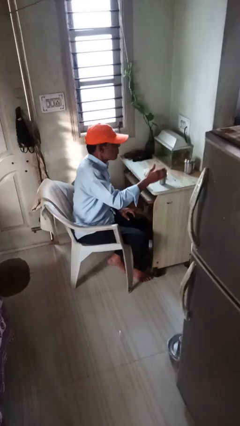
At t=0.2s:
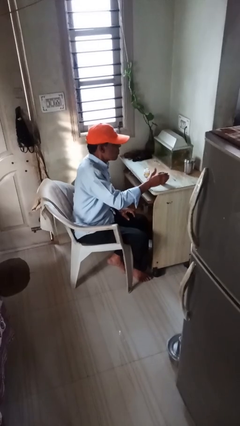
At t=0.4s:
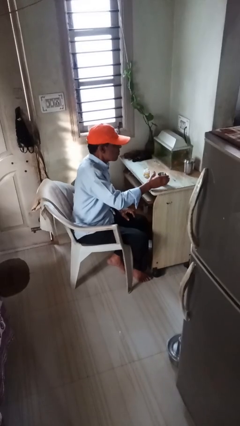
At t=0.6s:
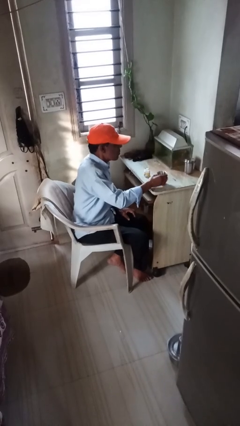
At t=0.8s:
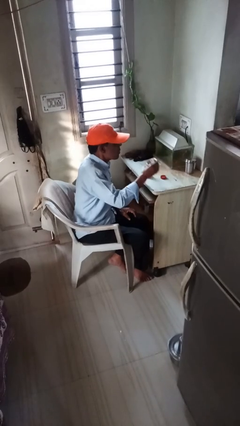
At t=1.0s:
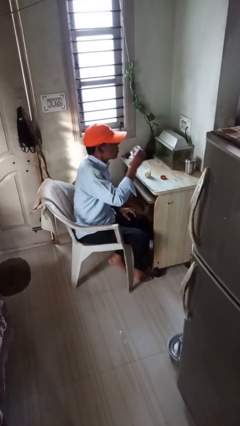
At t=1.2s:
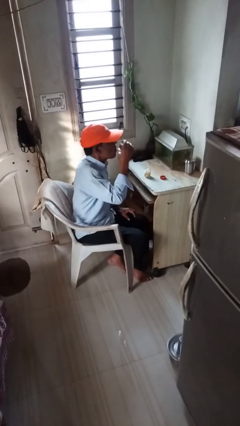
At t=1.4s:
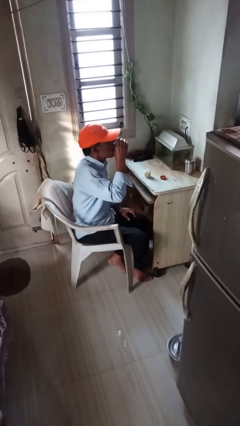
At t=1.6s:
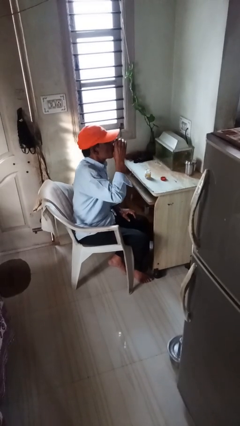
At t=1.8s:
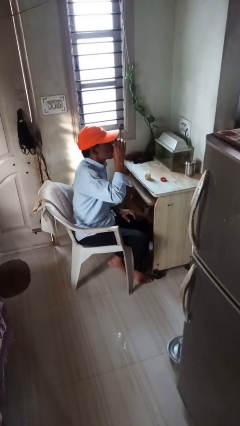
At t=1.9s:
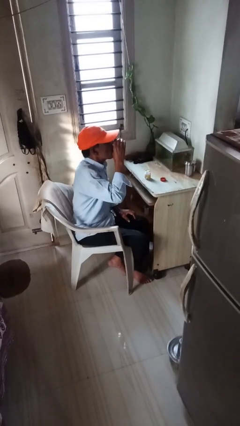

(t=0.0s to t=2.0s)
person drinks from cup

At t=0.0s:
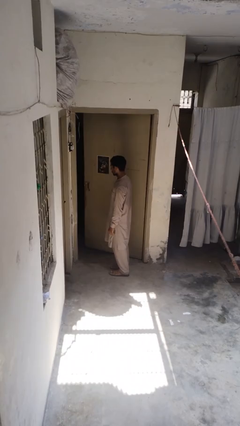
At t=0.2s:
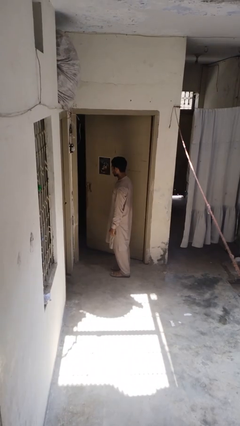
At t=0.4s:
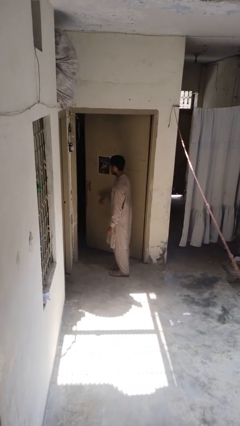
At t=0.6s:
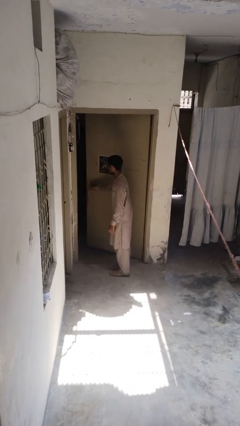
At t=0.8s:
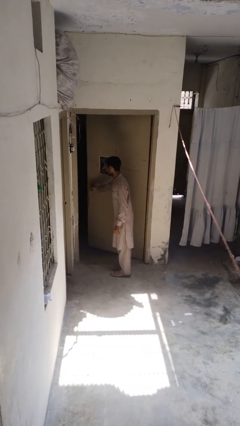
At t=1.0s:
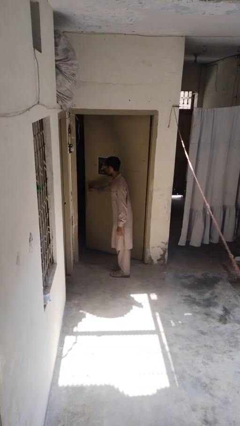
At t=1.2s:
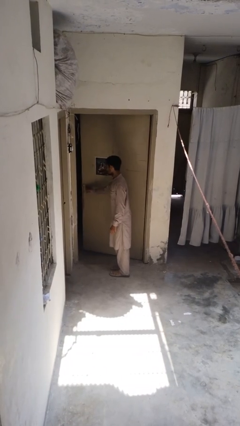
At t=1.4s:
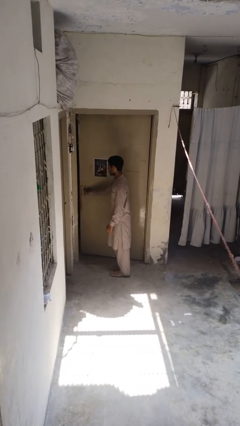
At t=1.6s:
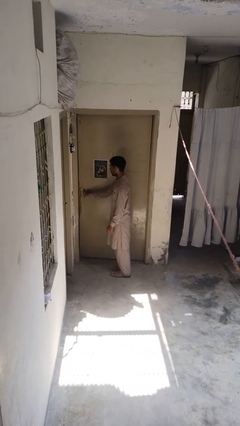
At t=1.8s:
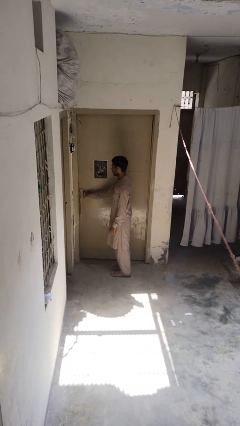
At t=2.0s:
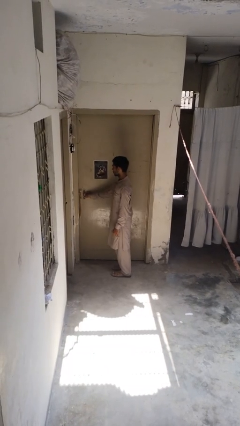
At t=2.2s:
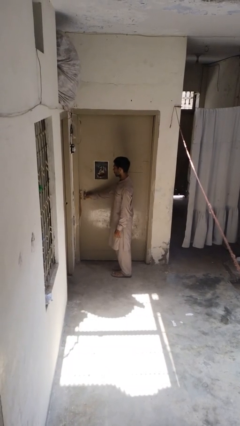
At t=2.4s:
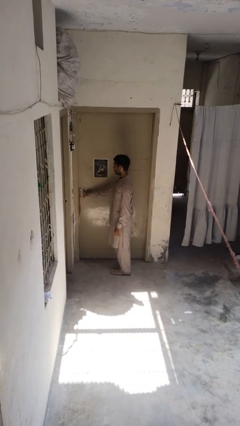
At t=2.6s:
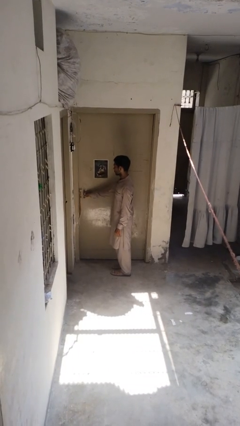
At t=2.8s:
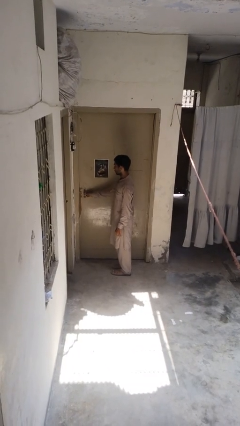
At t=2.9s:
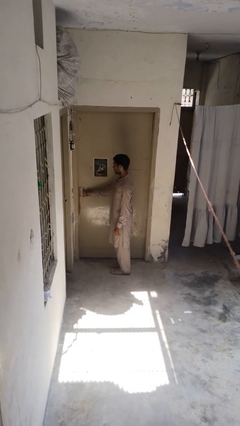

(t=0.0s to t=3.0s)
person closes door with foot

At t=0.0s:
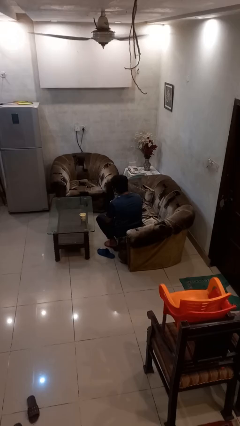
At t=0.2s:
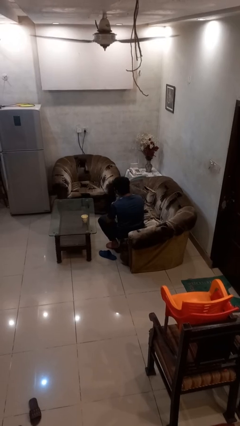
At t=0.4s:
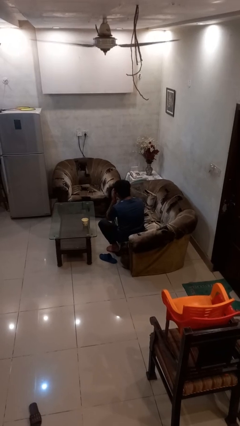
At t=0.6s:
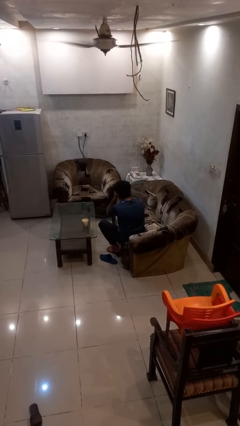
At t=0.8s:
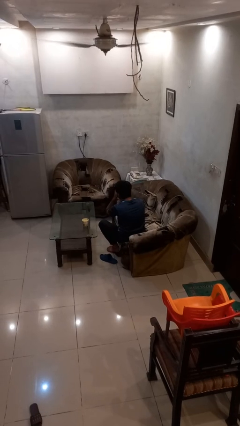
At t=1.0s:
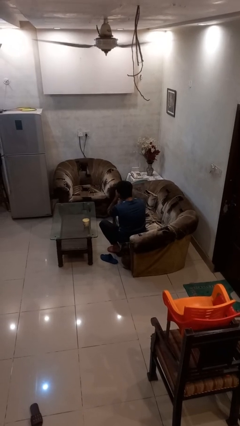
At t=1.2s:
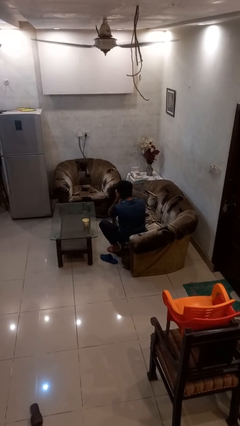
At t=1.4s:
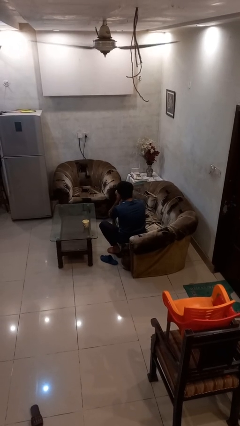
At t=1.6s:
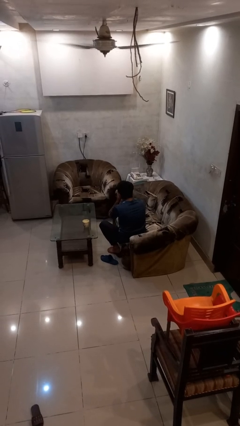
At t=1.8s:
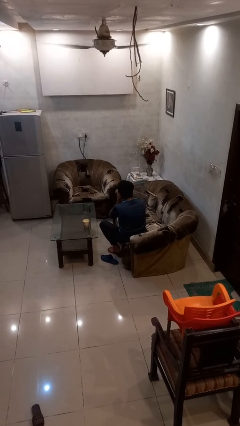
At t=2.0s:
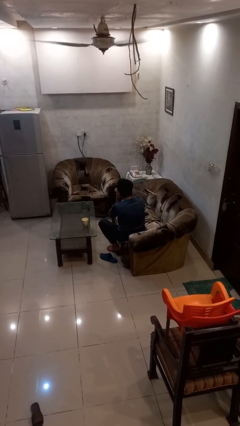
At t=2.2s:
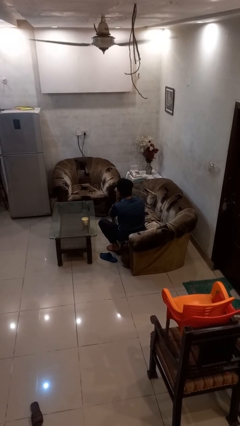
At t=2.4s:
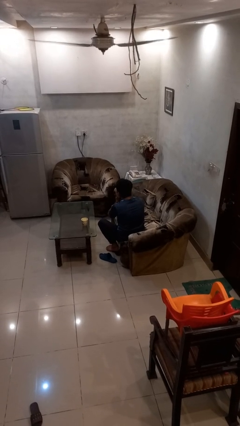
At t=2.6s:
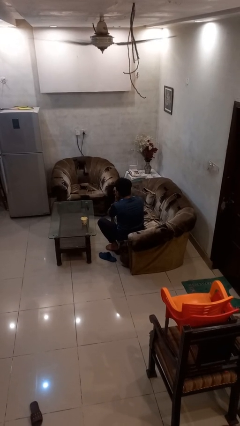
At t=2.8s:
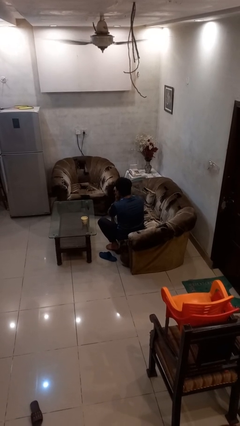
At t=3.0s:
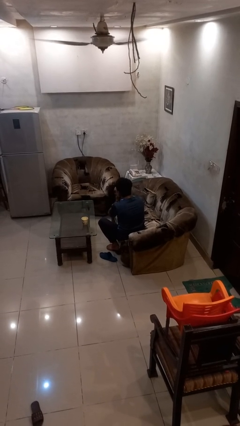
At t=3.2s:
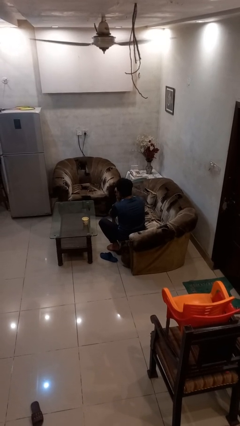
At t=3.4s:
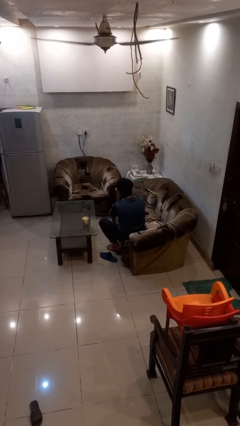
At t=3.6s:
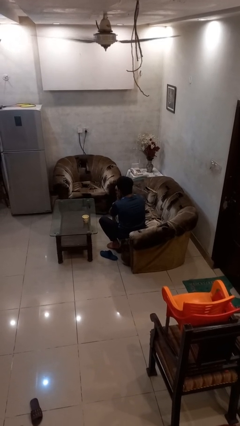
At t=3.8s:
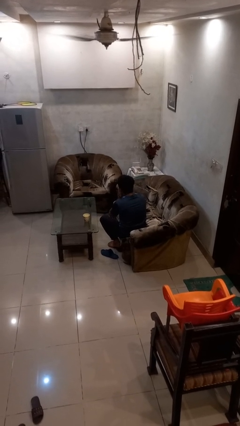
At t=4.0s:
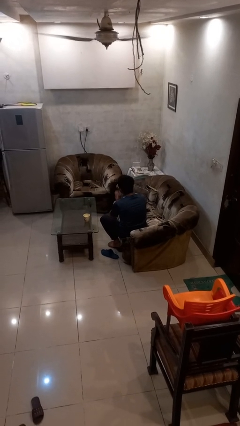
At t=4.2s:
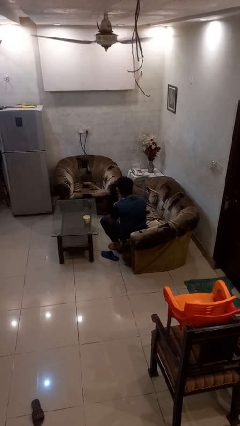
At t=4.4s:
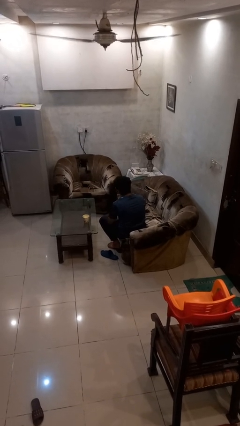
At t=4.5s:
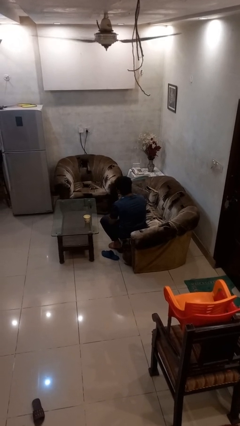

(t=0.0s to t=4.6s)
person covers face with hands

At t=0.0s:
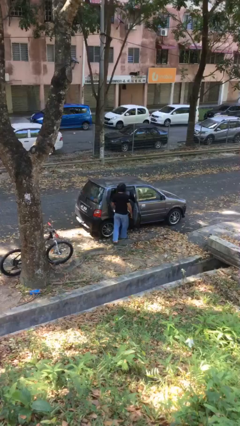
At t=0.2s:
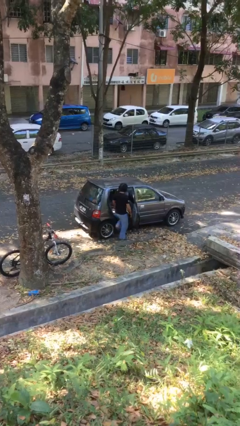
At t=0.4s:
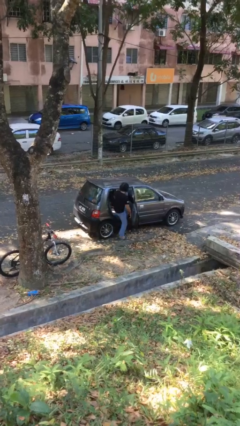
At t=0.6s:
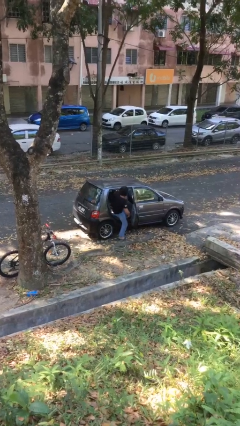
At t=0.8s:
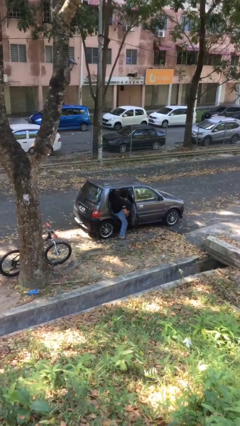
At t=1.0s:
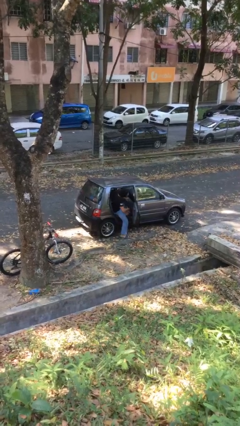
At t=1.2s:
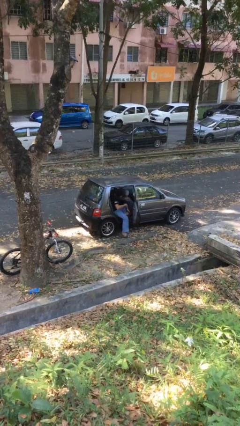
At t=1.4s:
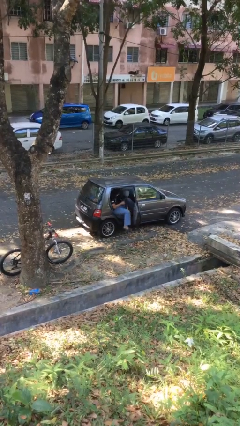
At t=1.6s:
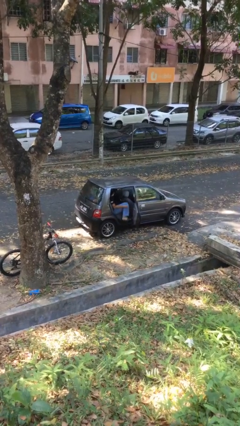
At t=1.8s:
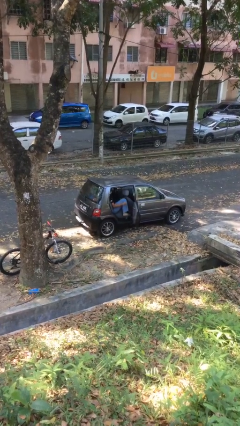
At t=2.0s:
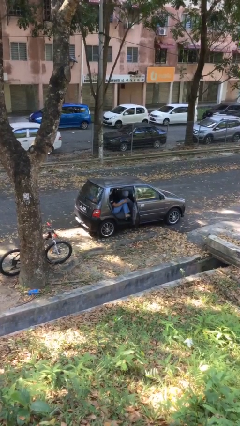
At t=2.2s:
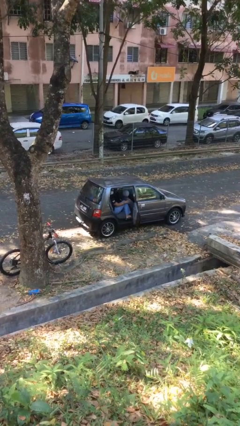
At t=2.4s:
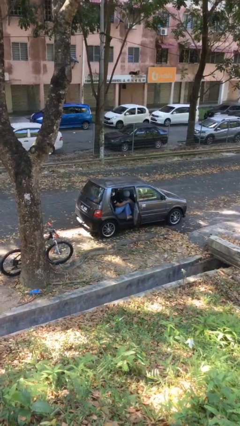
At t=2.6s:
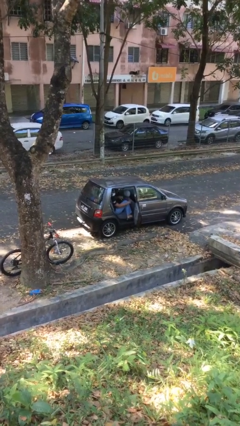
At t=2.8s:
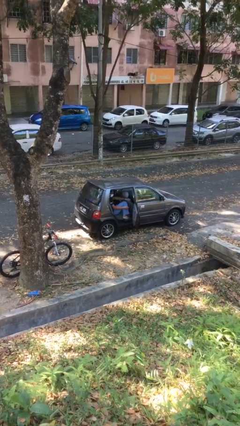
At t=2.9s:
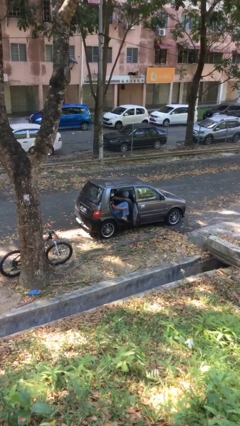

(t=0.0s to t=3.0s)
person enters car

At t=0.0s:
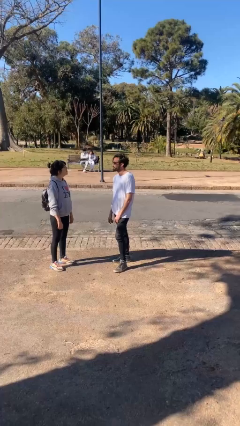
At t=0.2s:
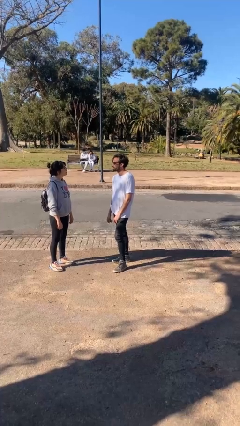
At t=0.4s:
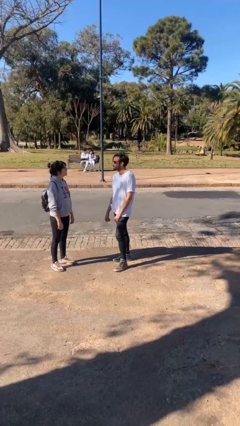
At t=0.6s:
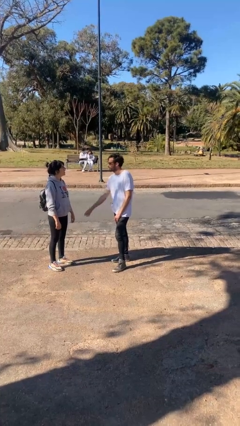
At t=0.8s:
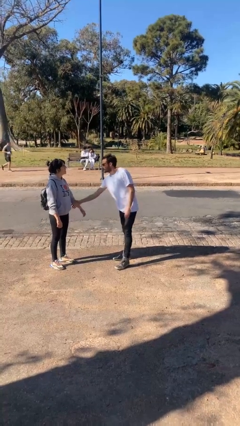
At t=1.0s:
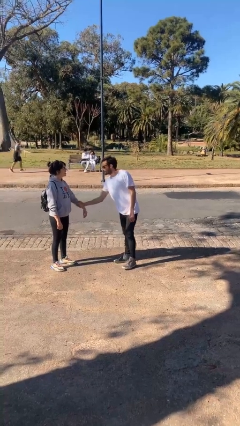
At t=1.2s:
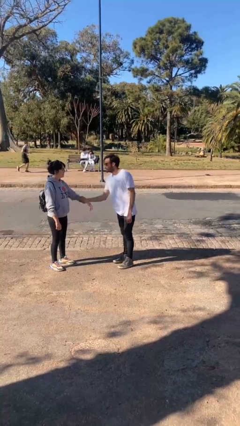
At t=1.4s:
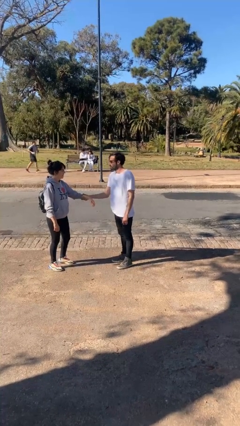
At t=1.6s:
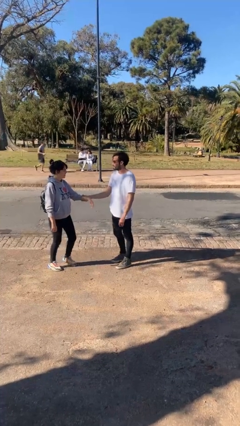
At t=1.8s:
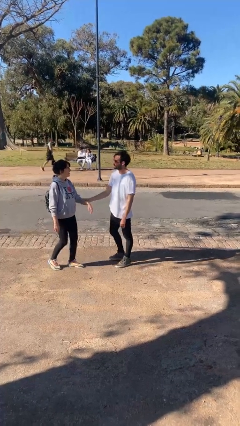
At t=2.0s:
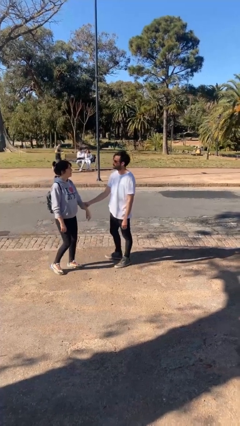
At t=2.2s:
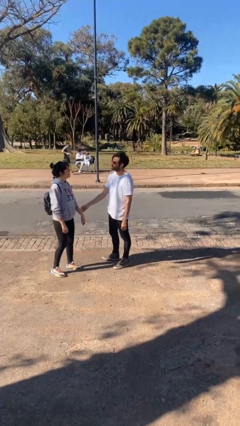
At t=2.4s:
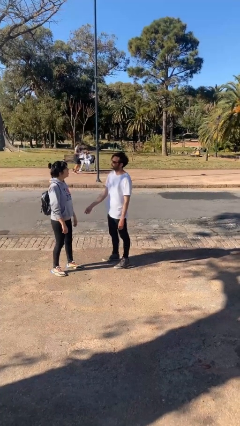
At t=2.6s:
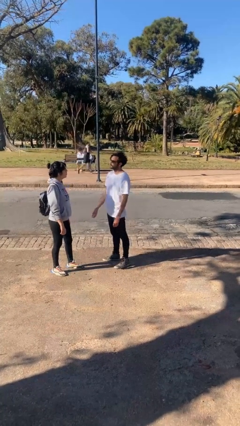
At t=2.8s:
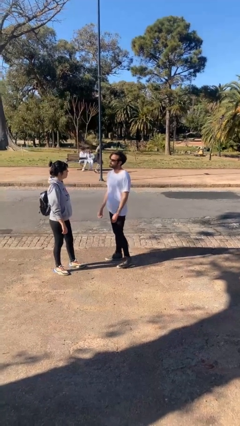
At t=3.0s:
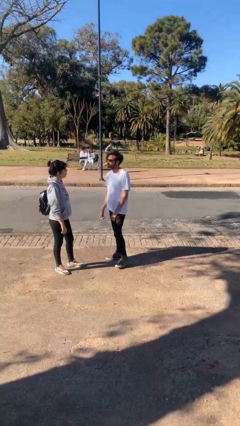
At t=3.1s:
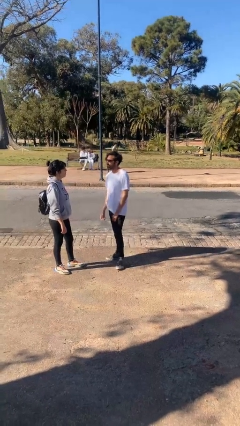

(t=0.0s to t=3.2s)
person grabs person by forearm

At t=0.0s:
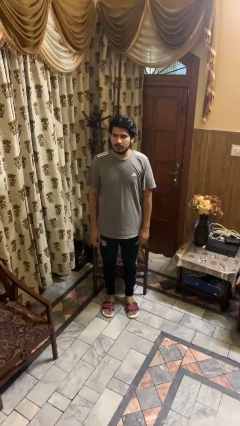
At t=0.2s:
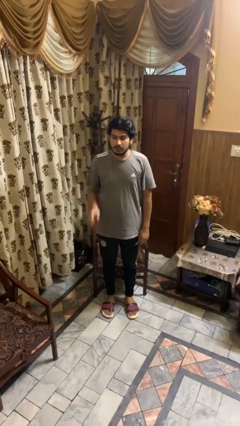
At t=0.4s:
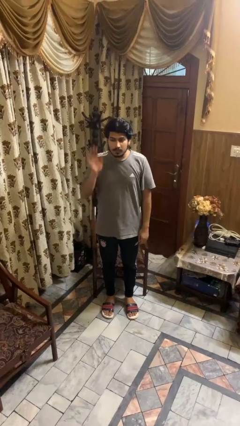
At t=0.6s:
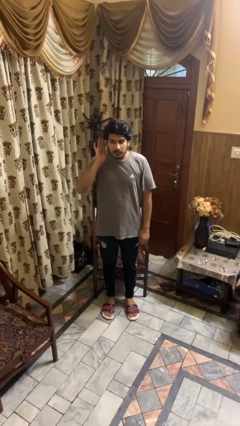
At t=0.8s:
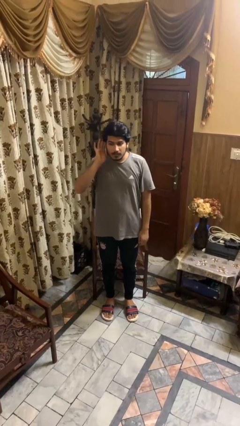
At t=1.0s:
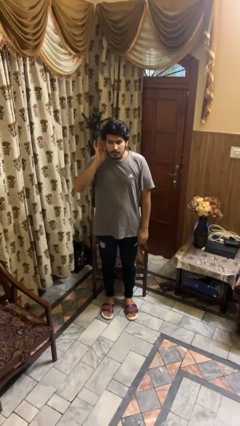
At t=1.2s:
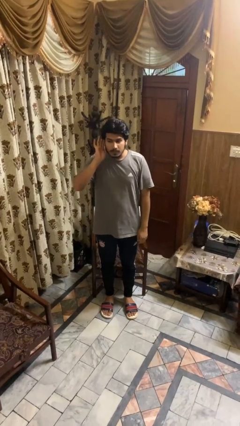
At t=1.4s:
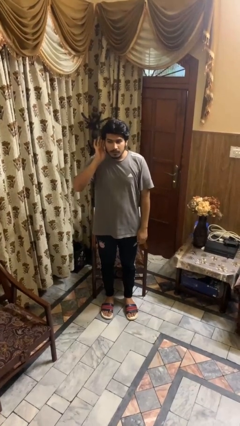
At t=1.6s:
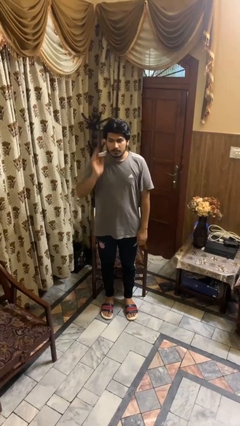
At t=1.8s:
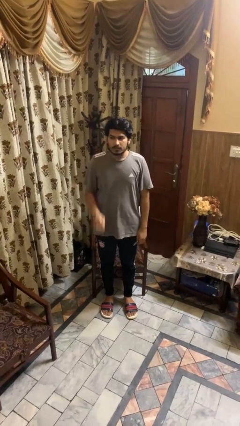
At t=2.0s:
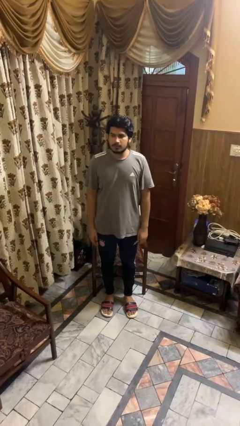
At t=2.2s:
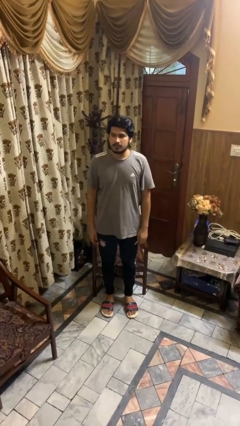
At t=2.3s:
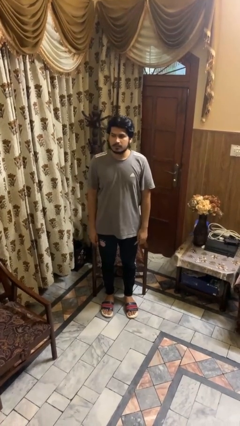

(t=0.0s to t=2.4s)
person gestures listen closely
